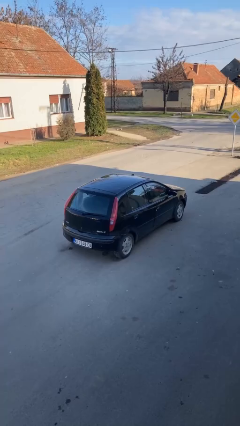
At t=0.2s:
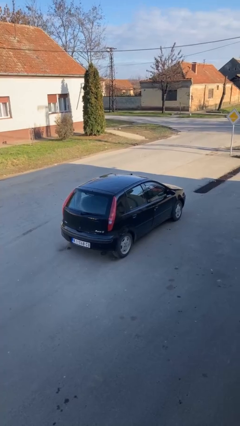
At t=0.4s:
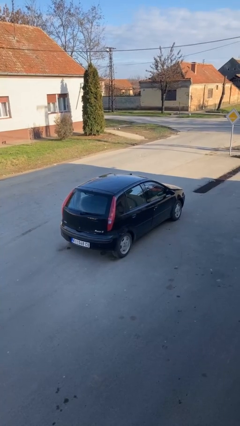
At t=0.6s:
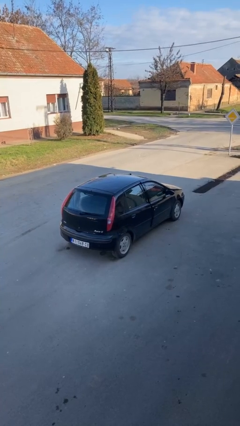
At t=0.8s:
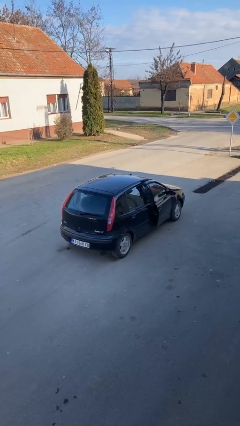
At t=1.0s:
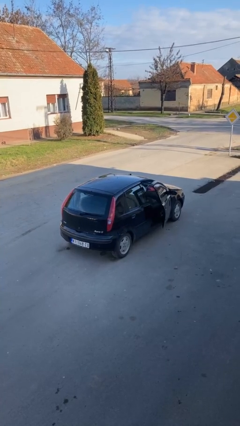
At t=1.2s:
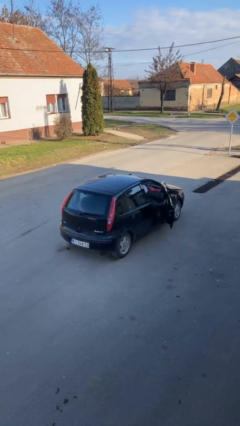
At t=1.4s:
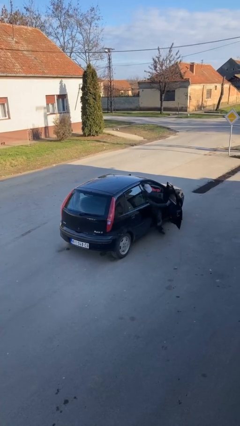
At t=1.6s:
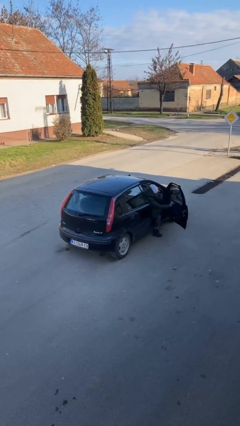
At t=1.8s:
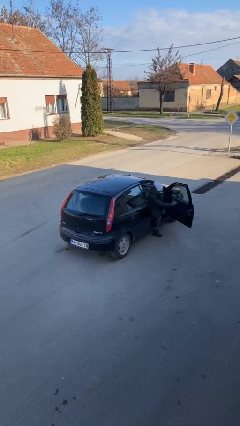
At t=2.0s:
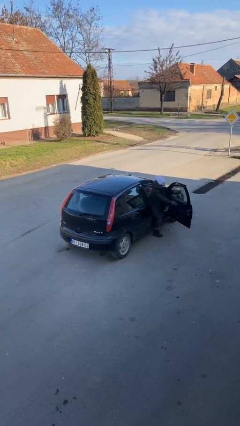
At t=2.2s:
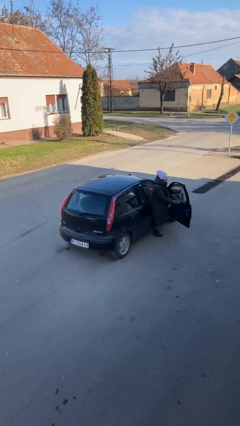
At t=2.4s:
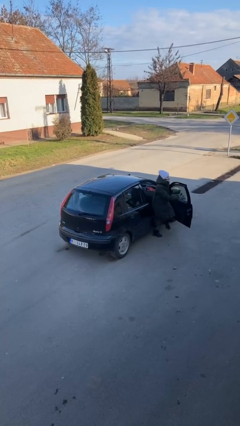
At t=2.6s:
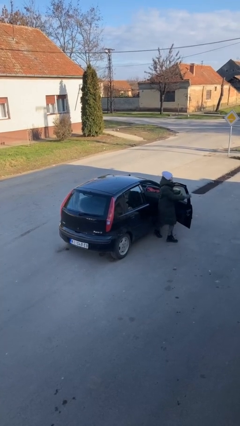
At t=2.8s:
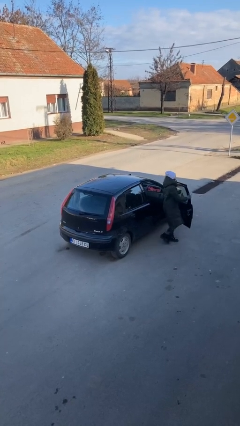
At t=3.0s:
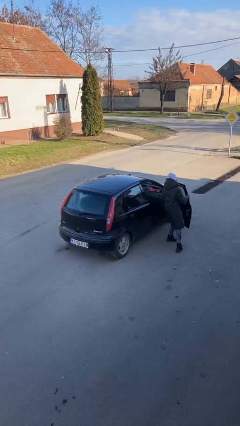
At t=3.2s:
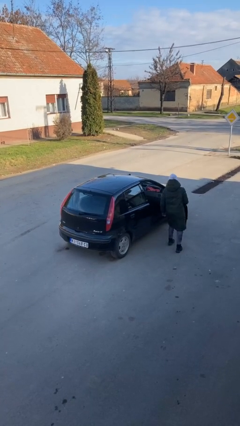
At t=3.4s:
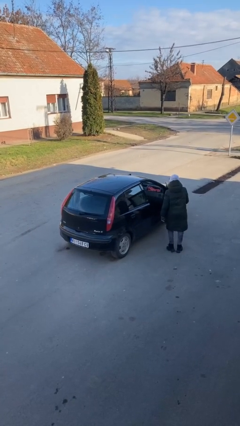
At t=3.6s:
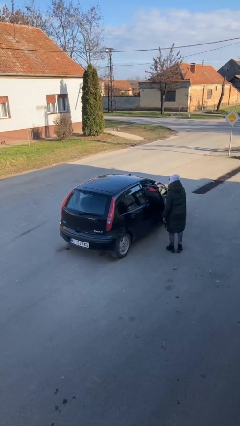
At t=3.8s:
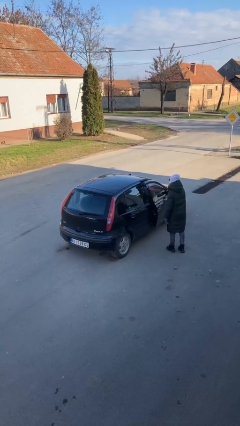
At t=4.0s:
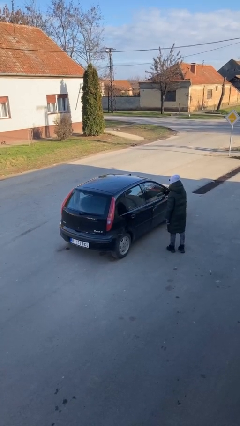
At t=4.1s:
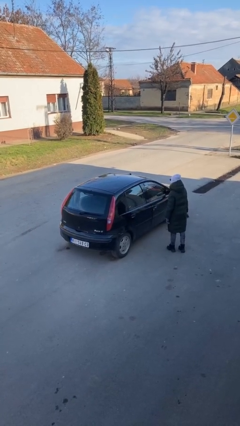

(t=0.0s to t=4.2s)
car drops off person

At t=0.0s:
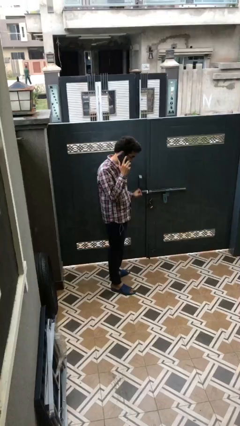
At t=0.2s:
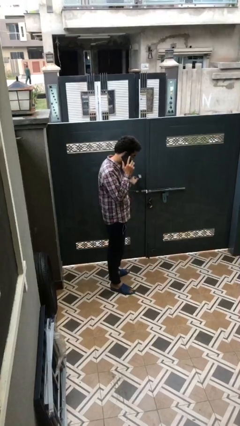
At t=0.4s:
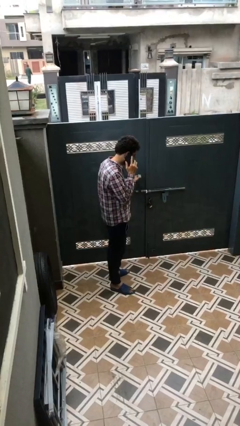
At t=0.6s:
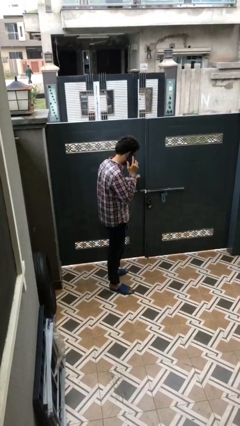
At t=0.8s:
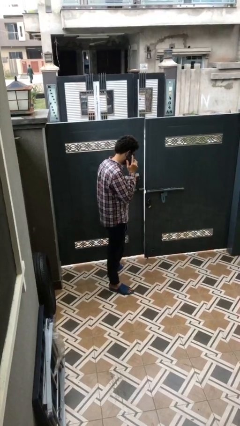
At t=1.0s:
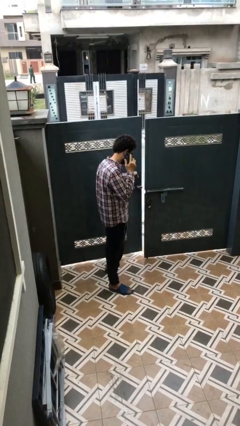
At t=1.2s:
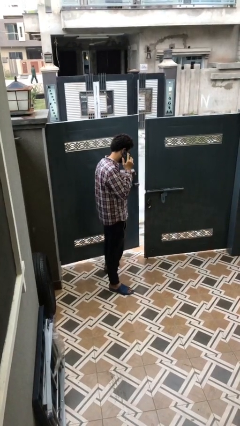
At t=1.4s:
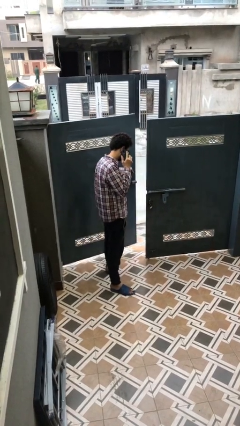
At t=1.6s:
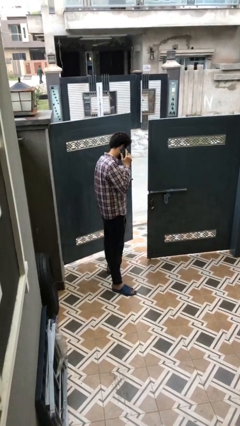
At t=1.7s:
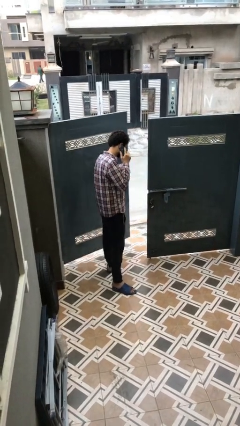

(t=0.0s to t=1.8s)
person opens facility door

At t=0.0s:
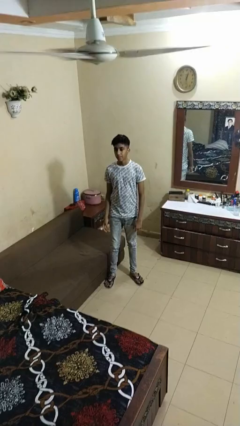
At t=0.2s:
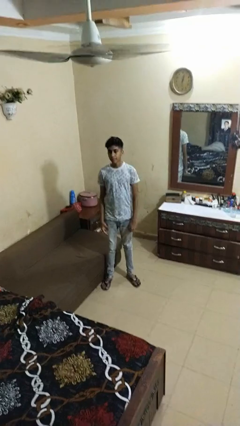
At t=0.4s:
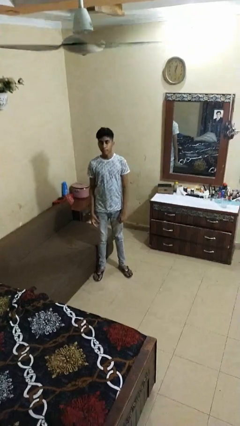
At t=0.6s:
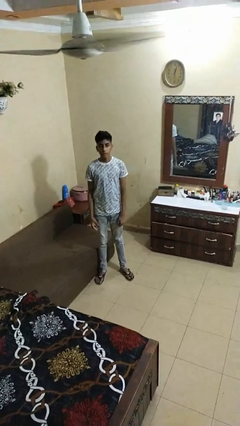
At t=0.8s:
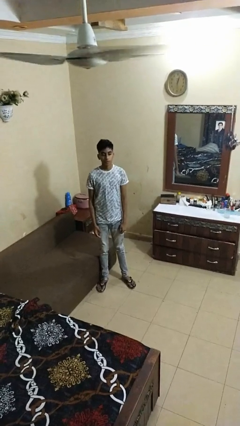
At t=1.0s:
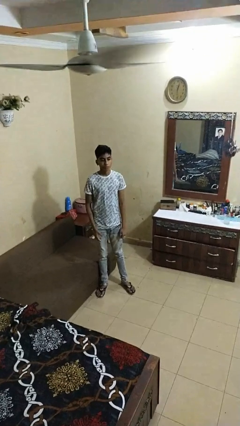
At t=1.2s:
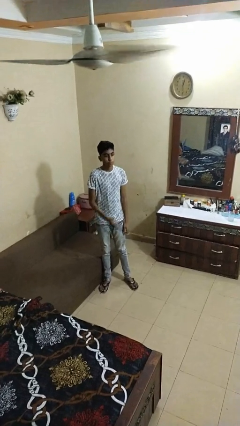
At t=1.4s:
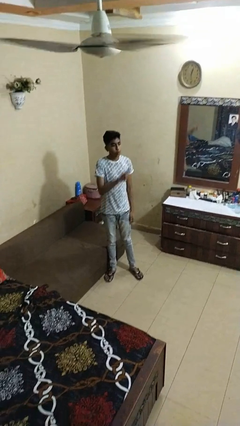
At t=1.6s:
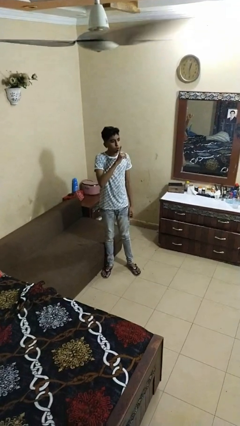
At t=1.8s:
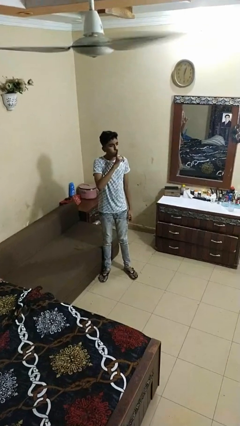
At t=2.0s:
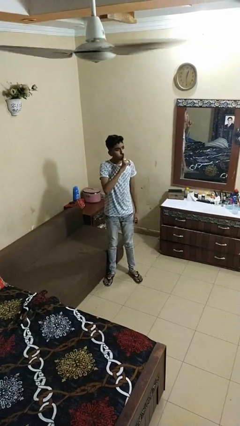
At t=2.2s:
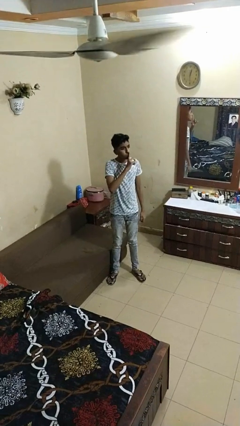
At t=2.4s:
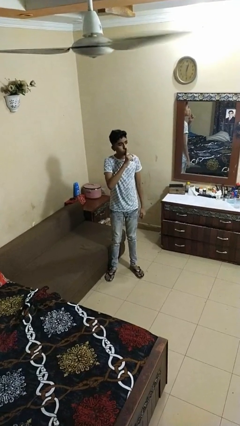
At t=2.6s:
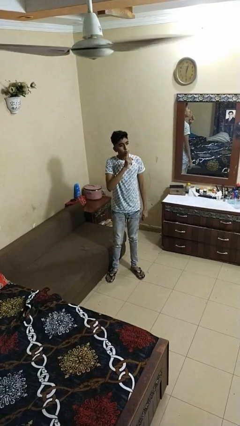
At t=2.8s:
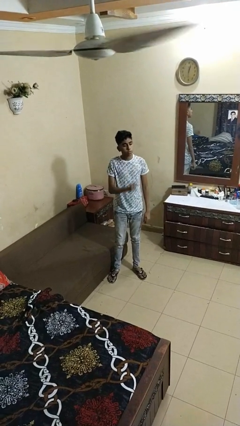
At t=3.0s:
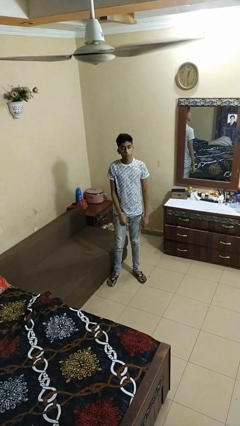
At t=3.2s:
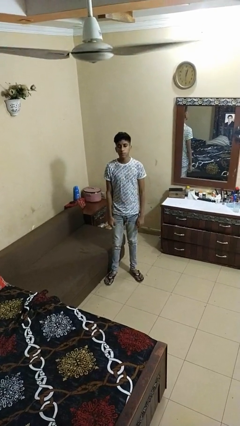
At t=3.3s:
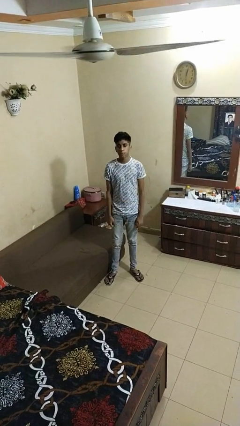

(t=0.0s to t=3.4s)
person gestures be quiet

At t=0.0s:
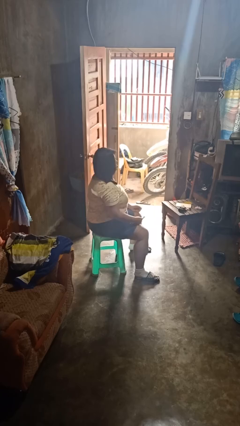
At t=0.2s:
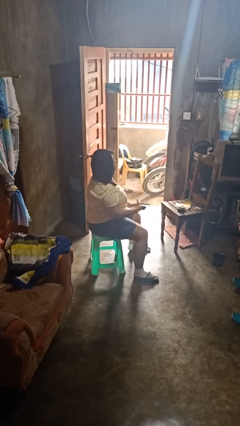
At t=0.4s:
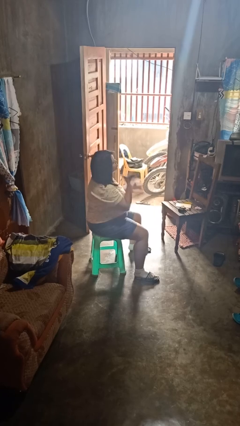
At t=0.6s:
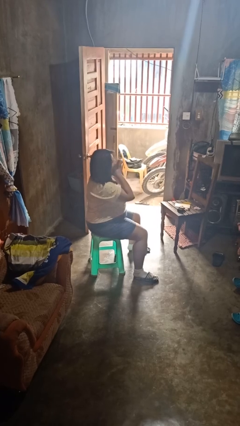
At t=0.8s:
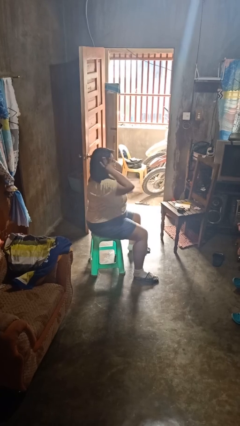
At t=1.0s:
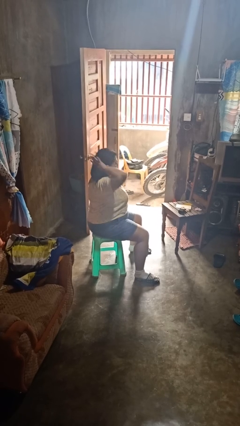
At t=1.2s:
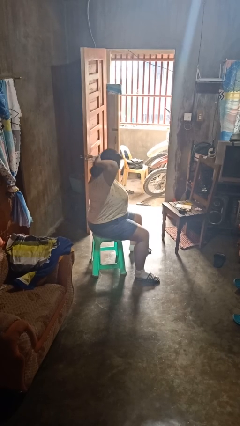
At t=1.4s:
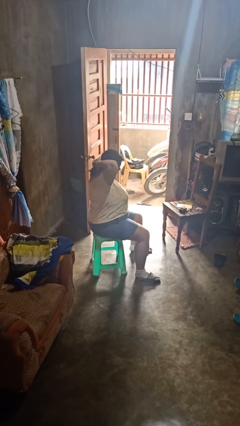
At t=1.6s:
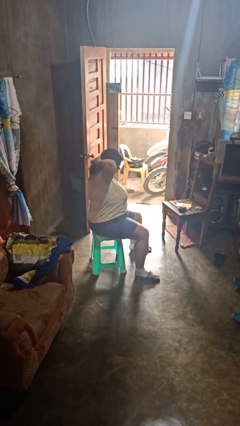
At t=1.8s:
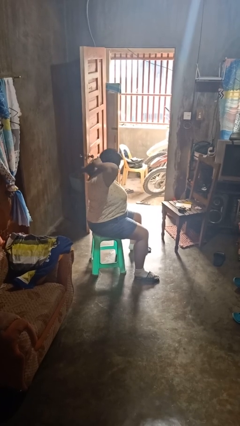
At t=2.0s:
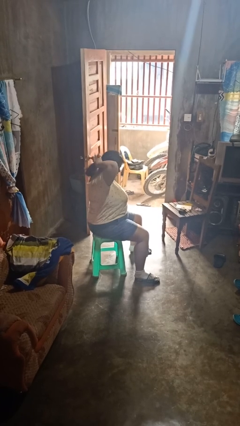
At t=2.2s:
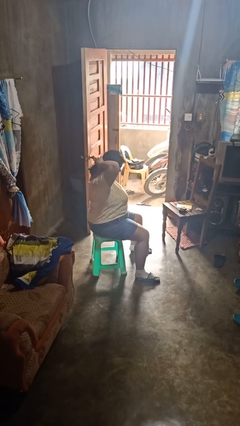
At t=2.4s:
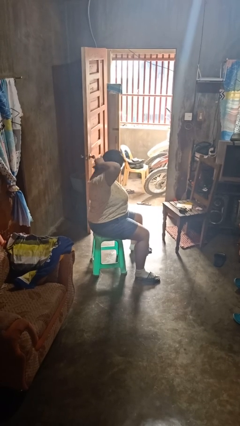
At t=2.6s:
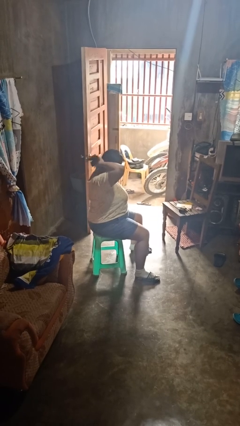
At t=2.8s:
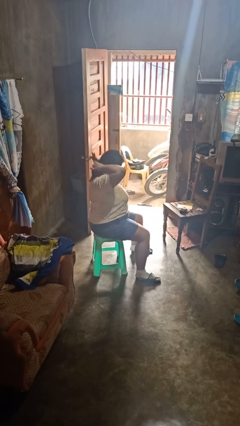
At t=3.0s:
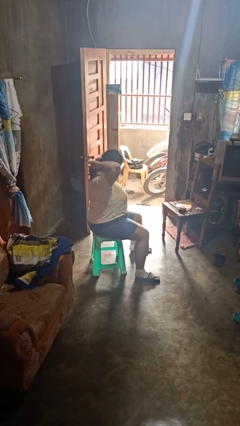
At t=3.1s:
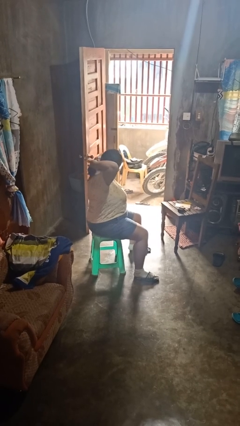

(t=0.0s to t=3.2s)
person puts hair in ponytail

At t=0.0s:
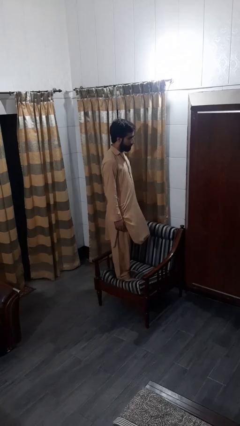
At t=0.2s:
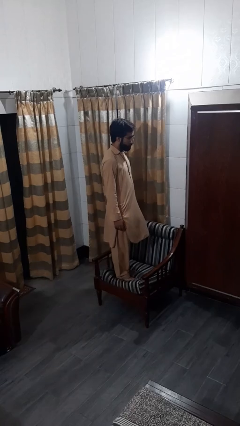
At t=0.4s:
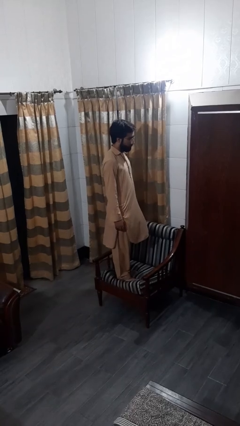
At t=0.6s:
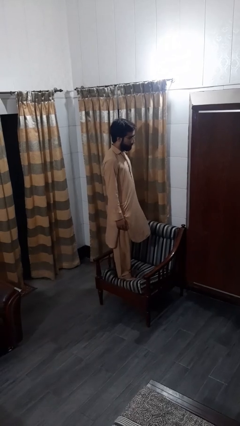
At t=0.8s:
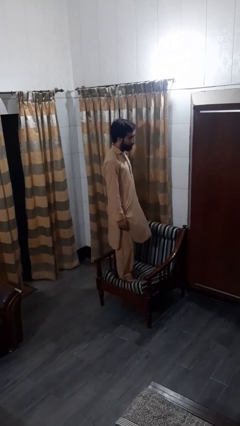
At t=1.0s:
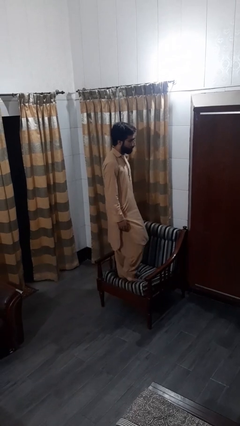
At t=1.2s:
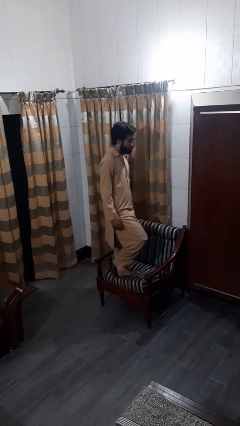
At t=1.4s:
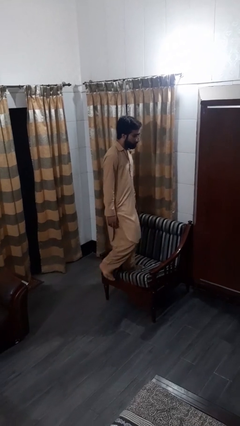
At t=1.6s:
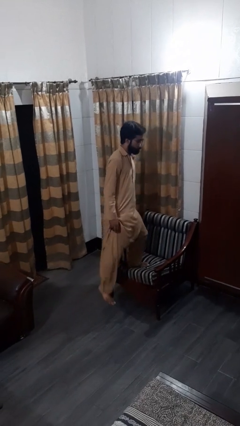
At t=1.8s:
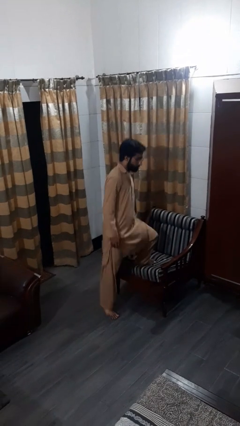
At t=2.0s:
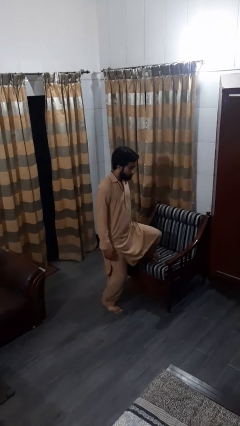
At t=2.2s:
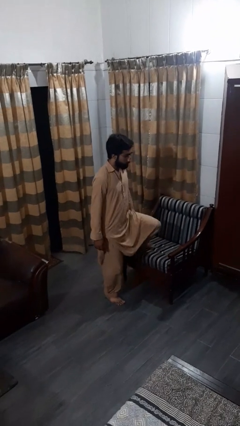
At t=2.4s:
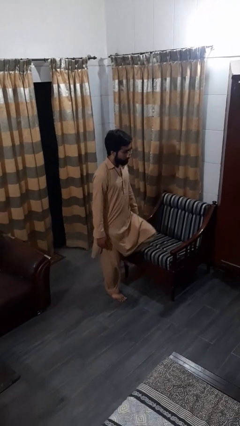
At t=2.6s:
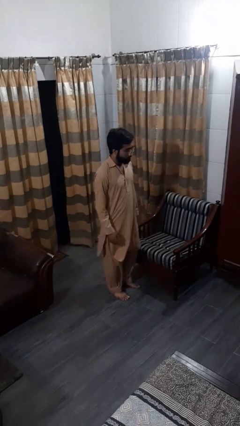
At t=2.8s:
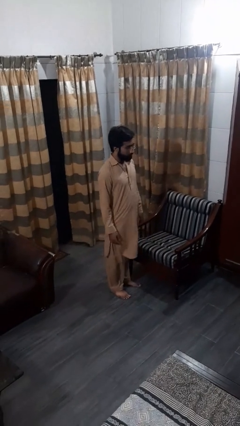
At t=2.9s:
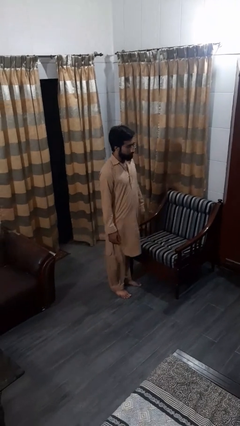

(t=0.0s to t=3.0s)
person climbs off chair

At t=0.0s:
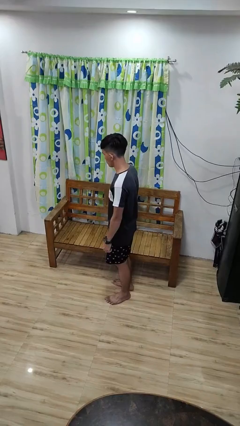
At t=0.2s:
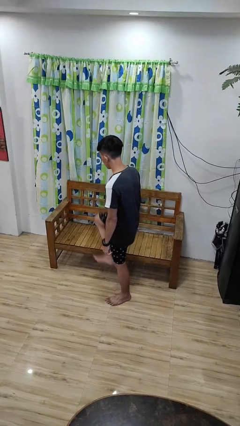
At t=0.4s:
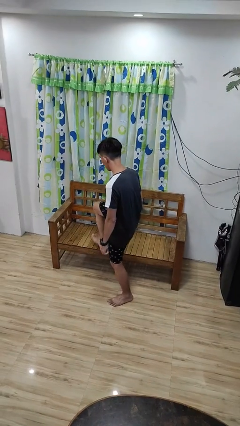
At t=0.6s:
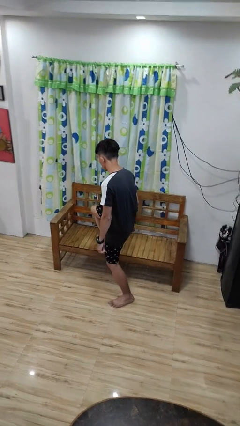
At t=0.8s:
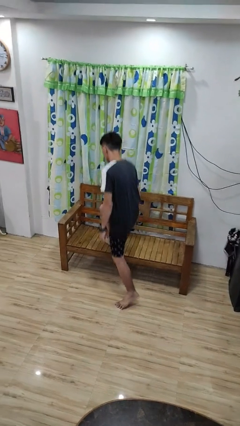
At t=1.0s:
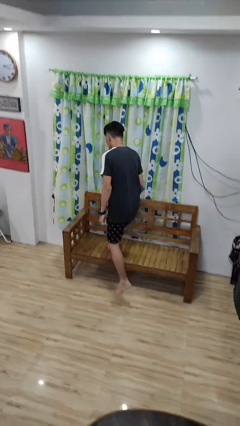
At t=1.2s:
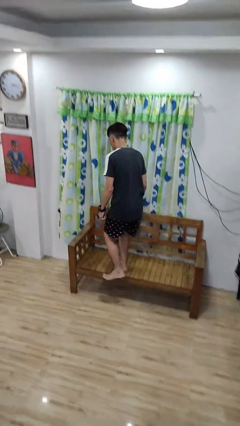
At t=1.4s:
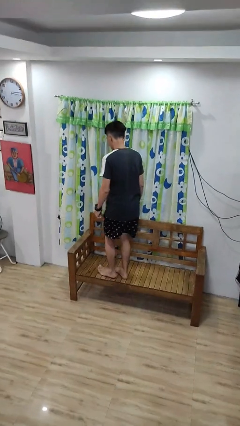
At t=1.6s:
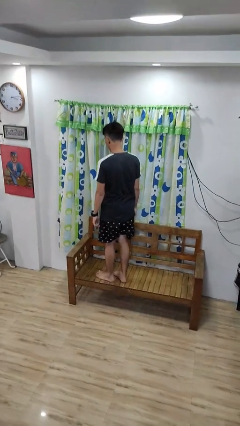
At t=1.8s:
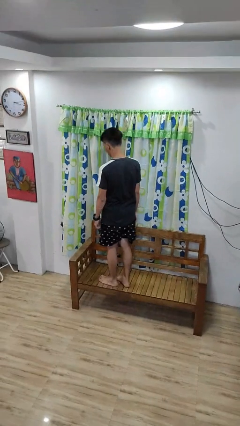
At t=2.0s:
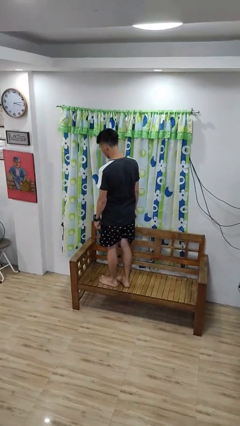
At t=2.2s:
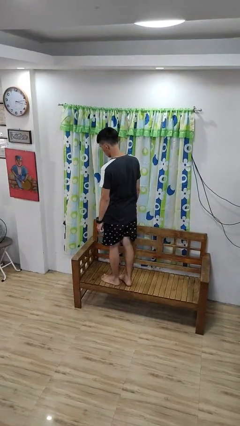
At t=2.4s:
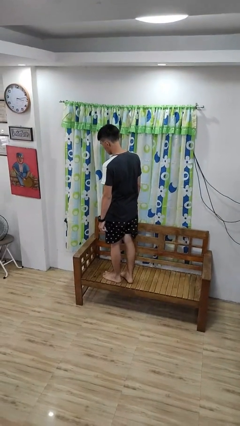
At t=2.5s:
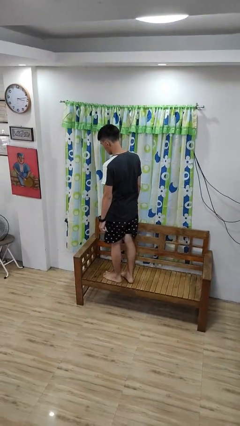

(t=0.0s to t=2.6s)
person climbs on couch
